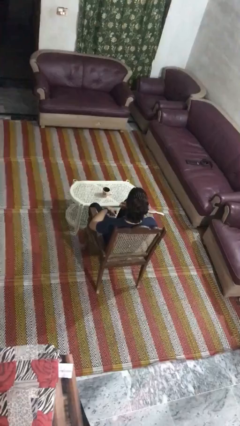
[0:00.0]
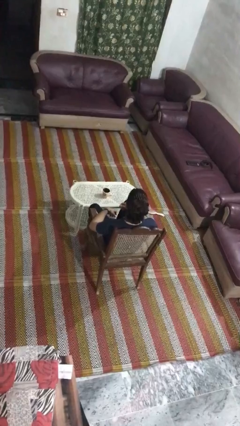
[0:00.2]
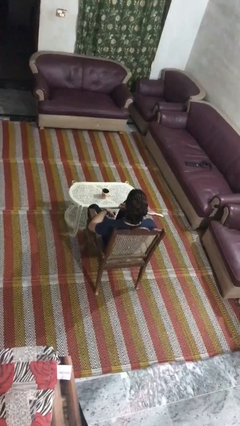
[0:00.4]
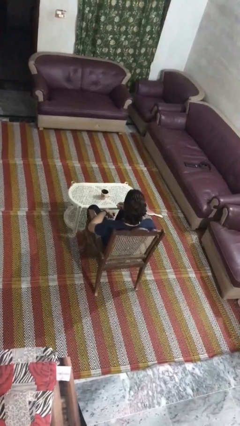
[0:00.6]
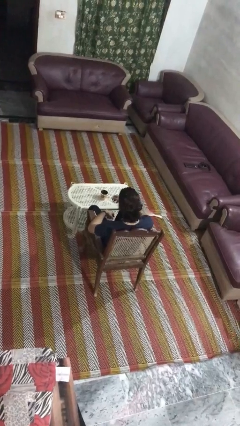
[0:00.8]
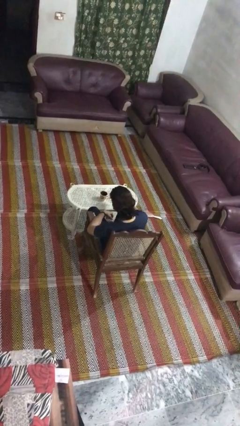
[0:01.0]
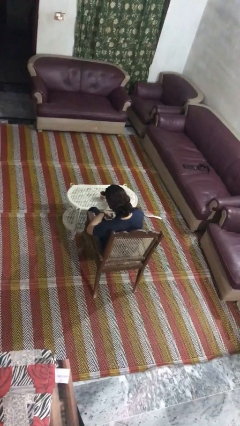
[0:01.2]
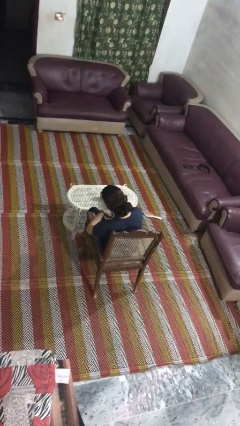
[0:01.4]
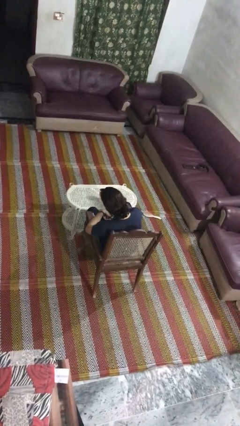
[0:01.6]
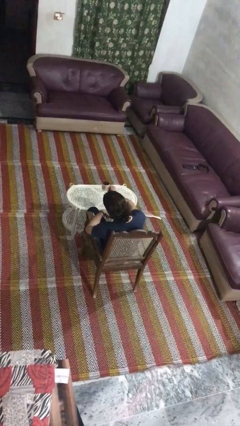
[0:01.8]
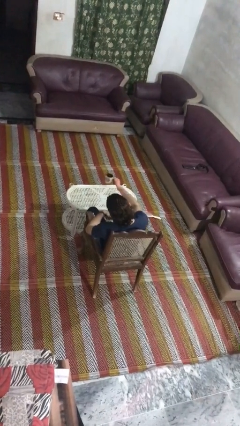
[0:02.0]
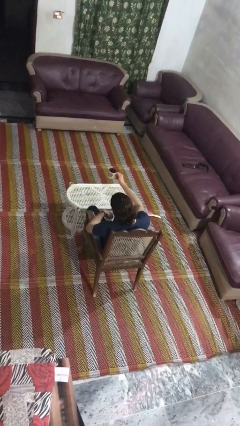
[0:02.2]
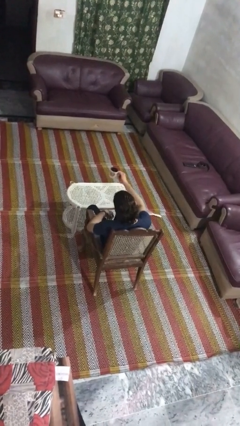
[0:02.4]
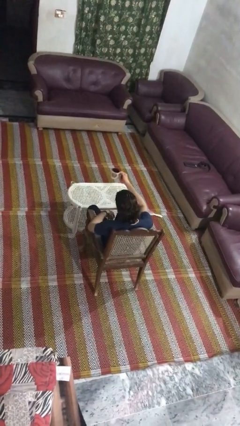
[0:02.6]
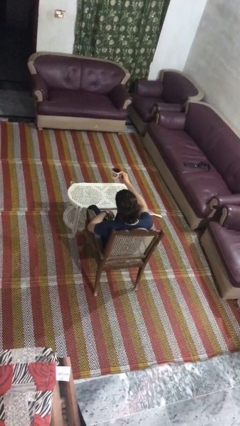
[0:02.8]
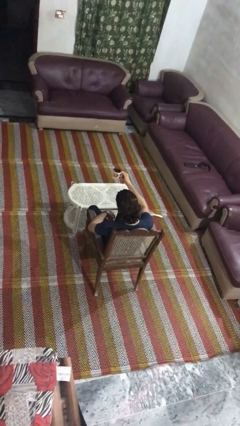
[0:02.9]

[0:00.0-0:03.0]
person picks up object from table

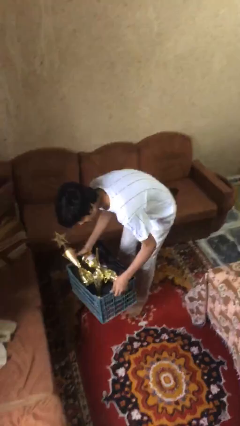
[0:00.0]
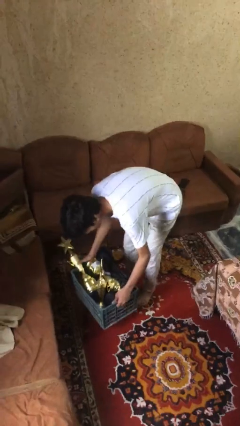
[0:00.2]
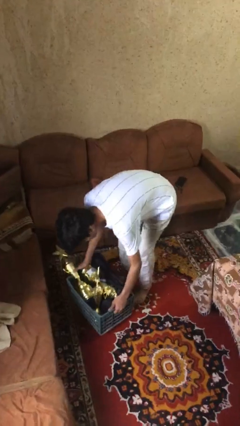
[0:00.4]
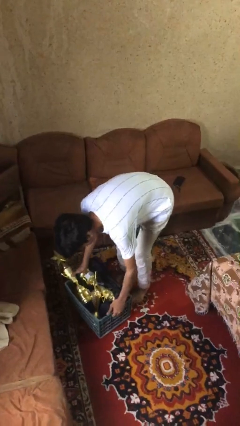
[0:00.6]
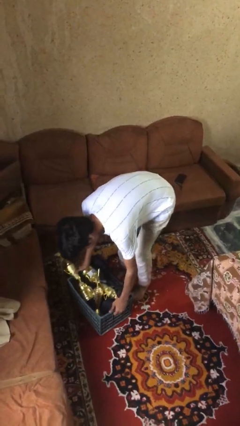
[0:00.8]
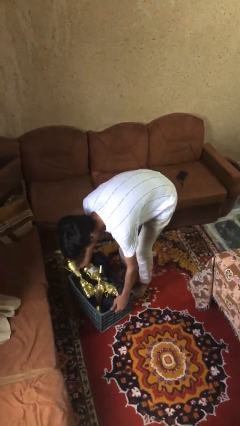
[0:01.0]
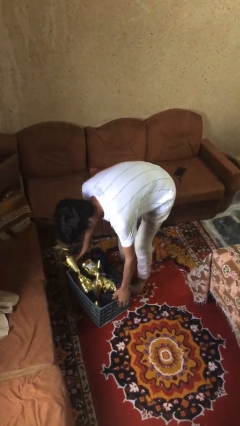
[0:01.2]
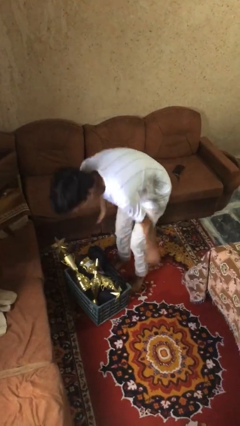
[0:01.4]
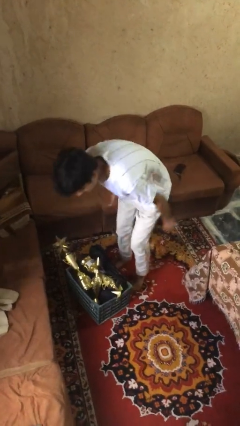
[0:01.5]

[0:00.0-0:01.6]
person puts down object on floor

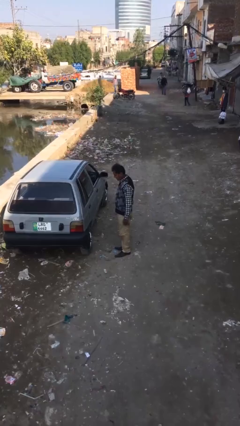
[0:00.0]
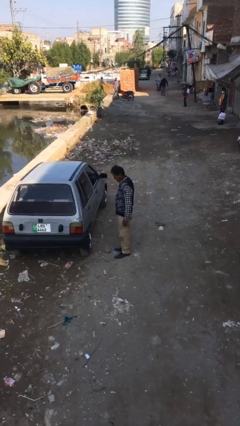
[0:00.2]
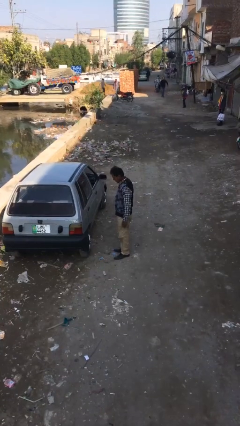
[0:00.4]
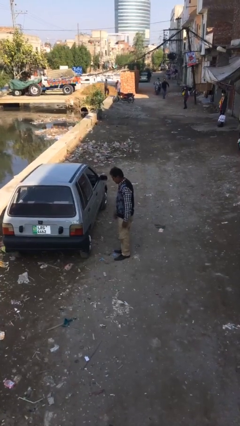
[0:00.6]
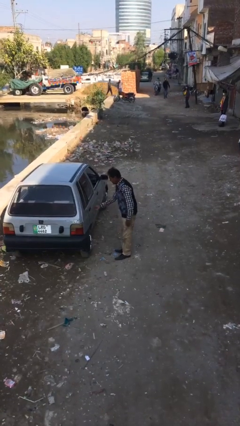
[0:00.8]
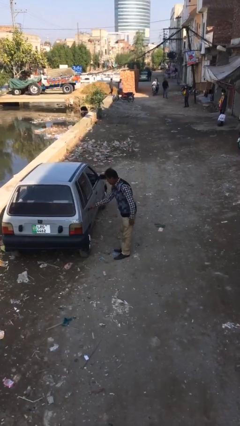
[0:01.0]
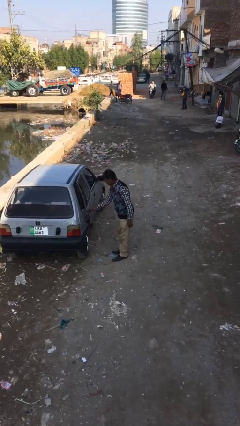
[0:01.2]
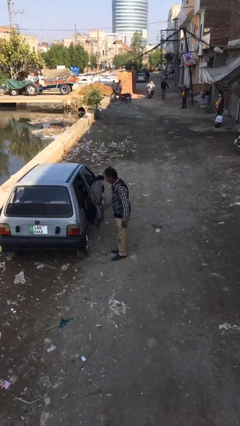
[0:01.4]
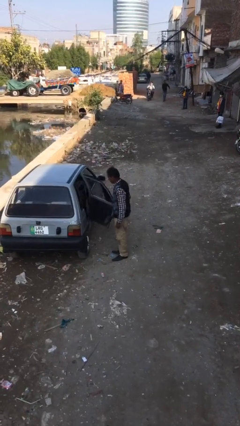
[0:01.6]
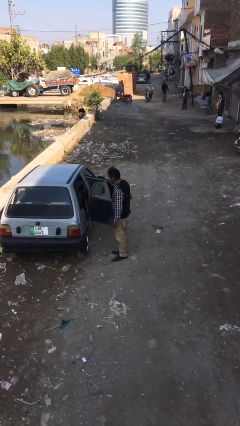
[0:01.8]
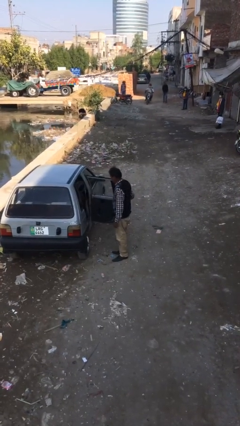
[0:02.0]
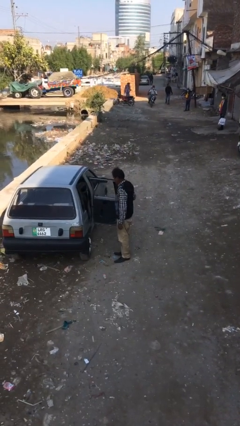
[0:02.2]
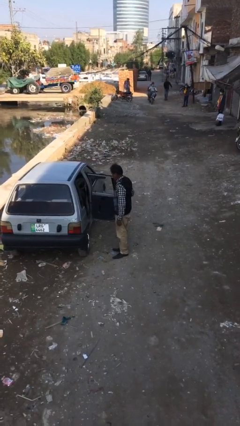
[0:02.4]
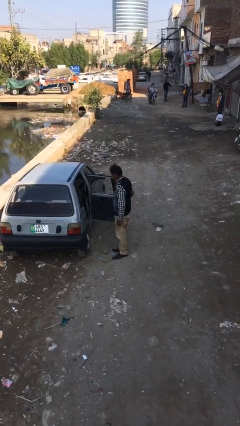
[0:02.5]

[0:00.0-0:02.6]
person opens car door

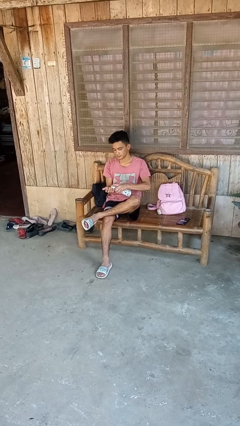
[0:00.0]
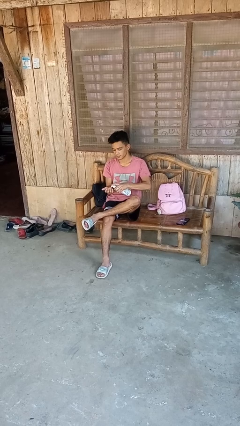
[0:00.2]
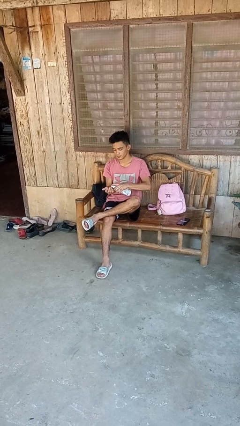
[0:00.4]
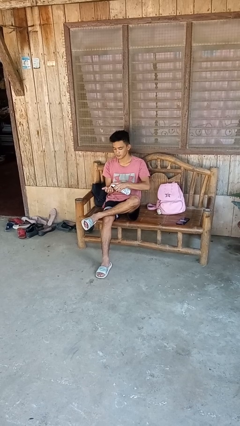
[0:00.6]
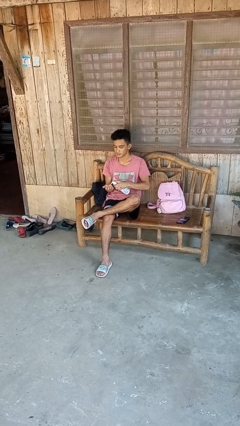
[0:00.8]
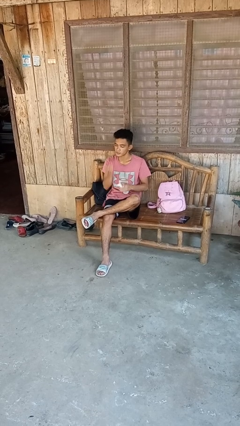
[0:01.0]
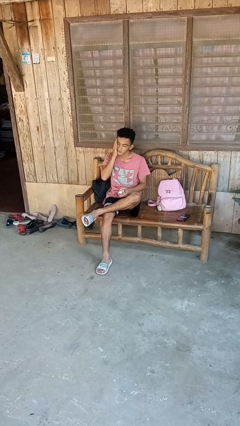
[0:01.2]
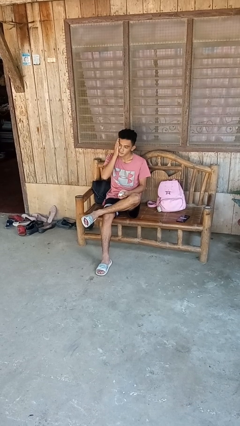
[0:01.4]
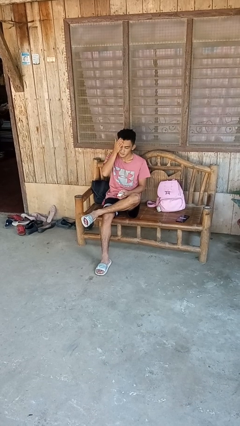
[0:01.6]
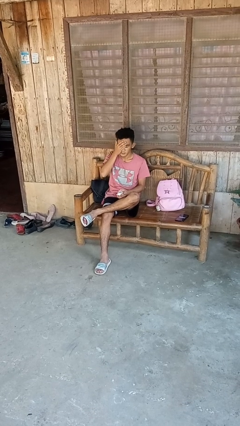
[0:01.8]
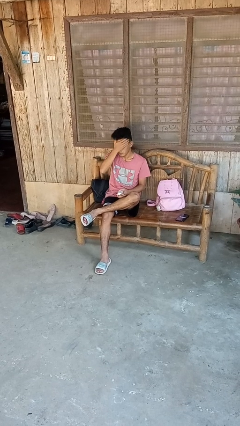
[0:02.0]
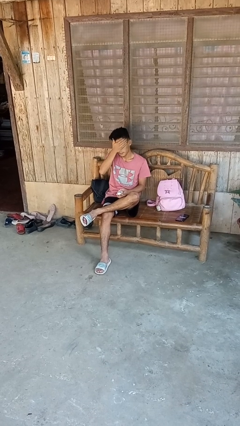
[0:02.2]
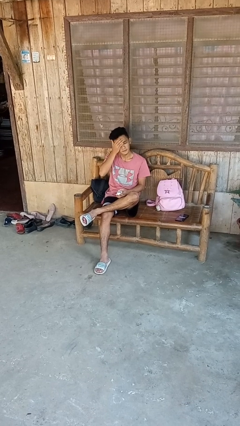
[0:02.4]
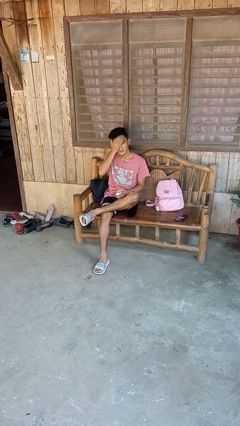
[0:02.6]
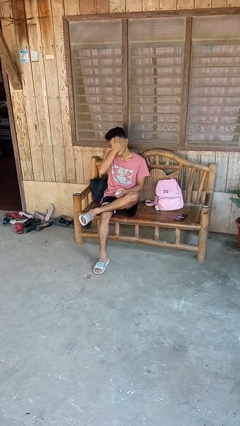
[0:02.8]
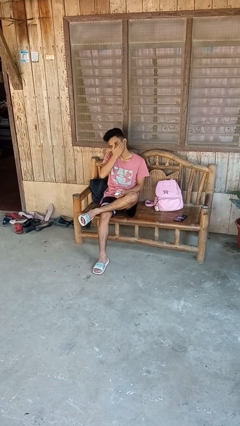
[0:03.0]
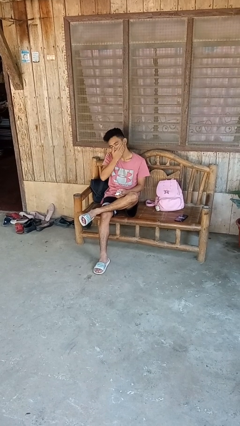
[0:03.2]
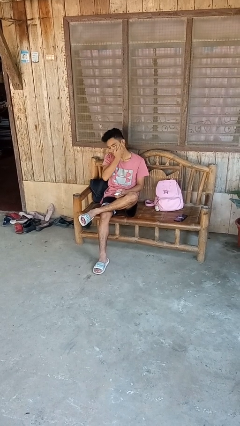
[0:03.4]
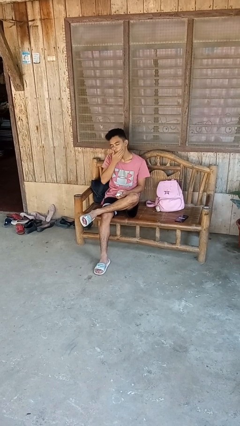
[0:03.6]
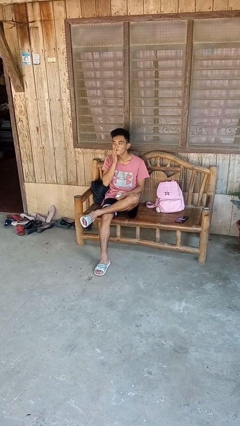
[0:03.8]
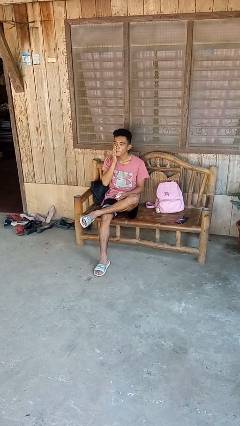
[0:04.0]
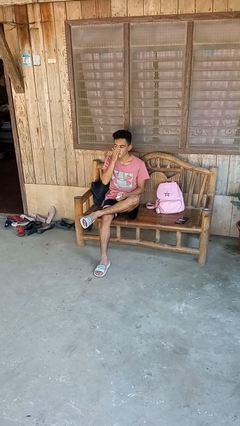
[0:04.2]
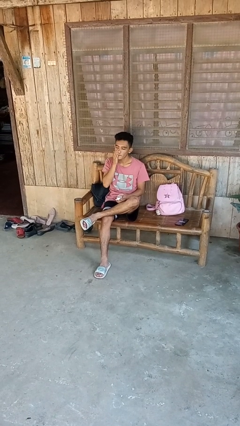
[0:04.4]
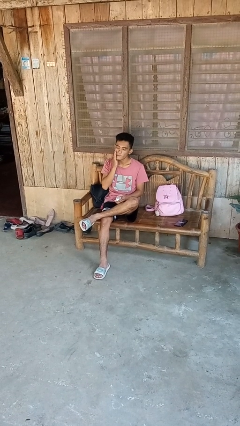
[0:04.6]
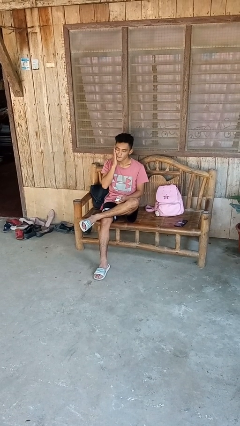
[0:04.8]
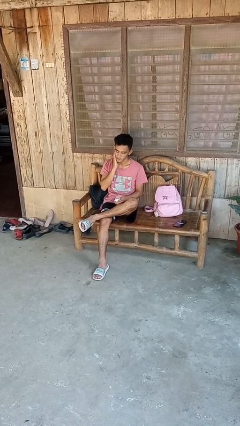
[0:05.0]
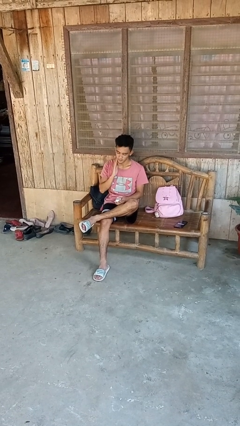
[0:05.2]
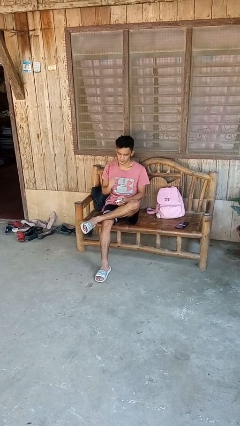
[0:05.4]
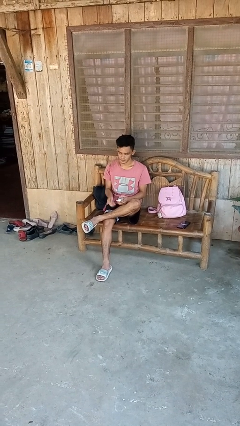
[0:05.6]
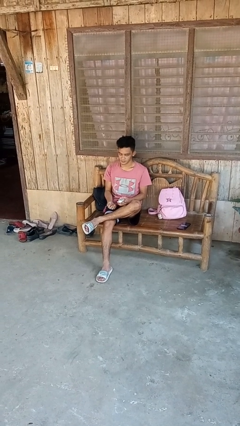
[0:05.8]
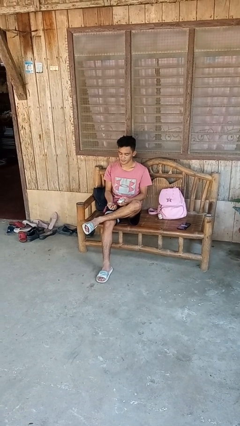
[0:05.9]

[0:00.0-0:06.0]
person applies sunscreen

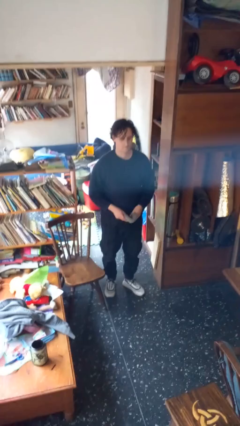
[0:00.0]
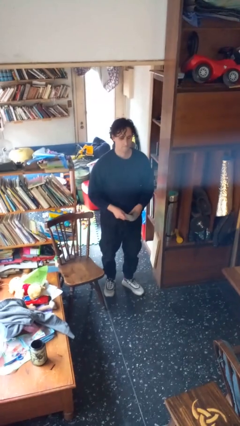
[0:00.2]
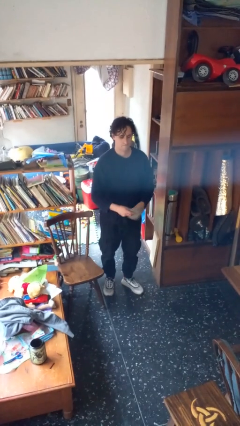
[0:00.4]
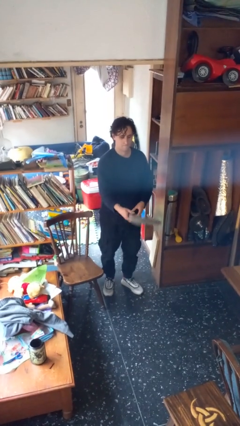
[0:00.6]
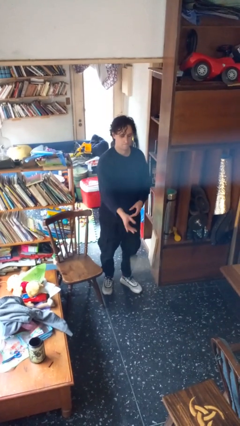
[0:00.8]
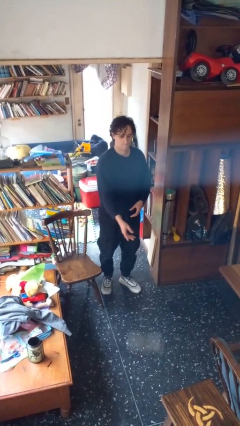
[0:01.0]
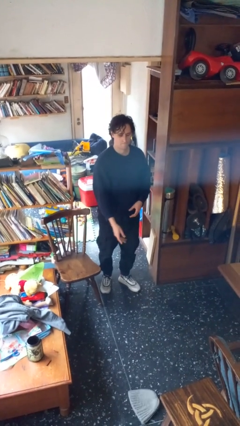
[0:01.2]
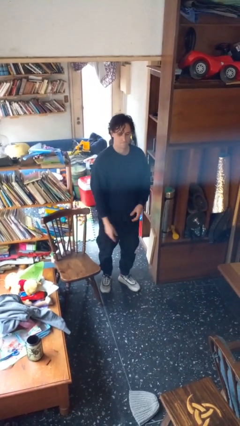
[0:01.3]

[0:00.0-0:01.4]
person throws object to ground

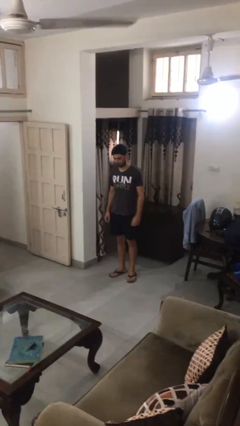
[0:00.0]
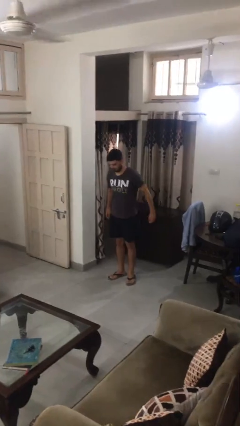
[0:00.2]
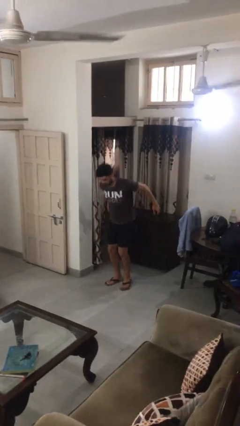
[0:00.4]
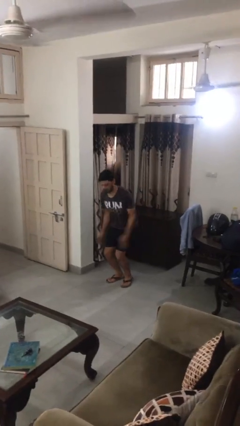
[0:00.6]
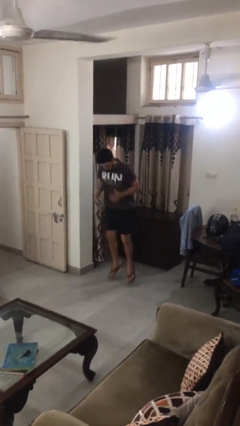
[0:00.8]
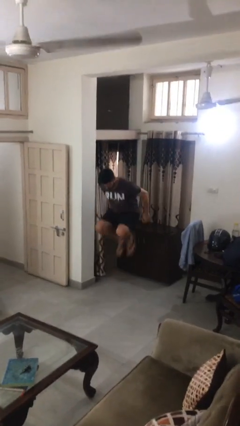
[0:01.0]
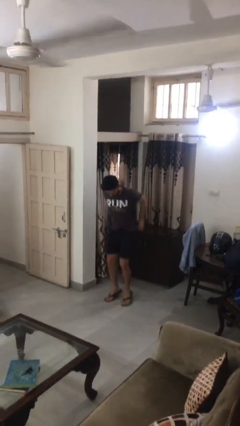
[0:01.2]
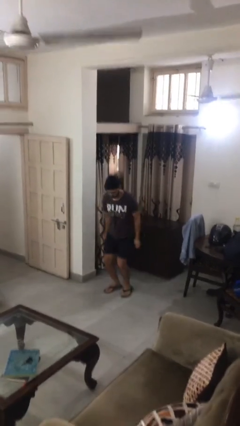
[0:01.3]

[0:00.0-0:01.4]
person jumps

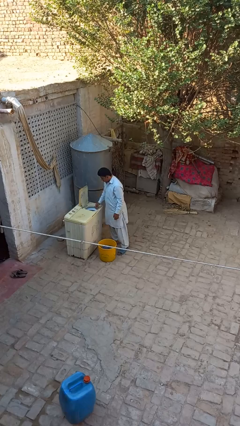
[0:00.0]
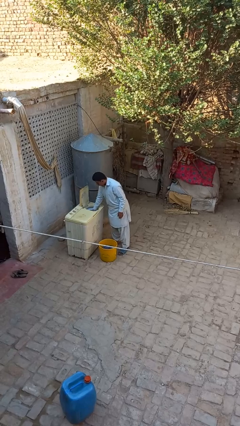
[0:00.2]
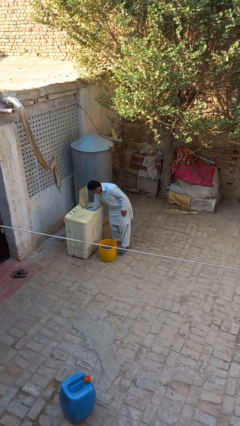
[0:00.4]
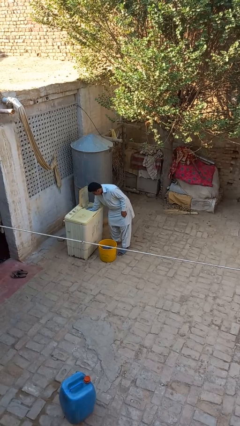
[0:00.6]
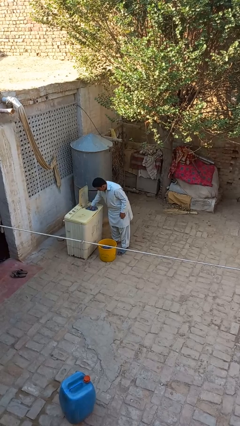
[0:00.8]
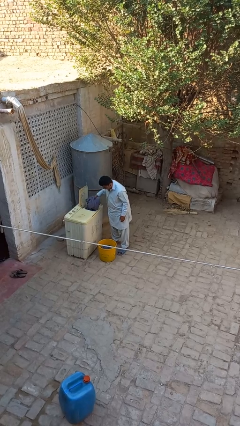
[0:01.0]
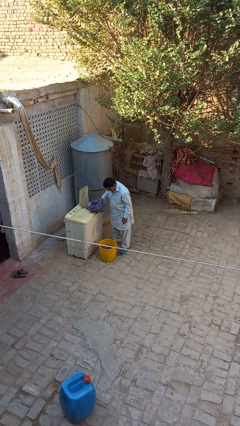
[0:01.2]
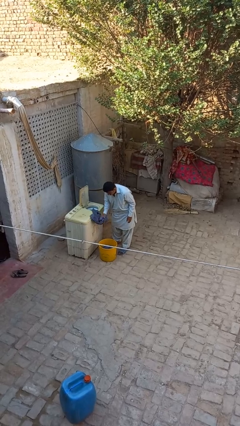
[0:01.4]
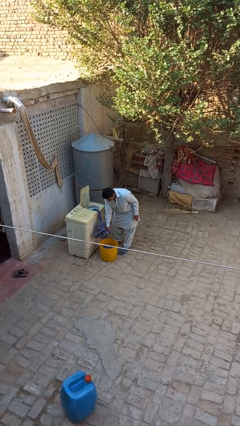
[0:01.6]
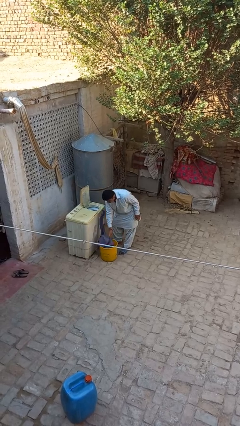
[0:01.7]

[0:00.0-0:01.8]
person unloads dryer
